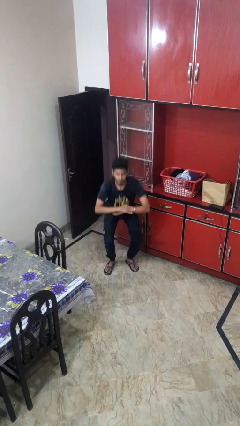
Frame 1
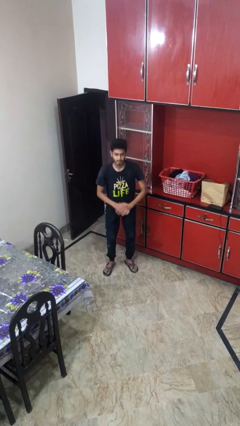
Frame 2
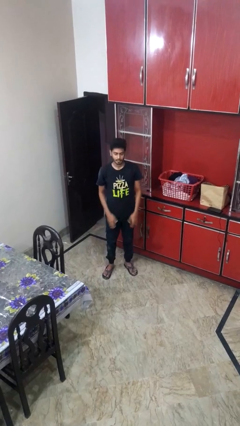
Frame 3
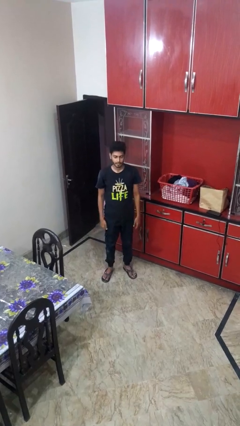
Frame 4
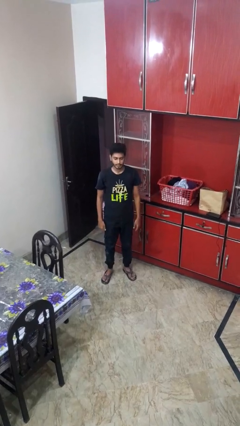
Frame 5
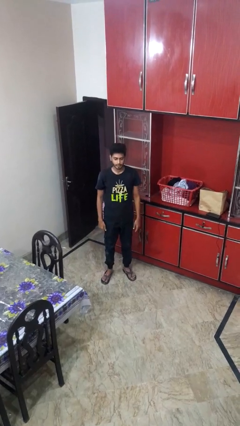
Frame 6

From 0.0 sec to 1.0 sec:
person stands up

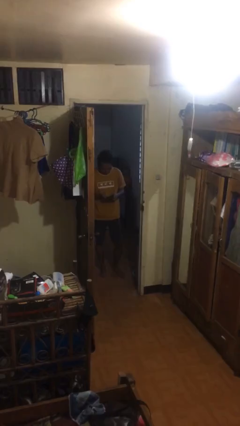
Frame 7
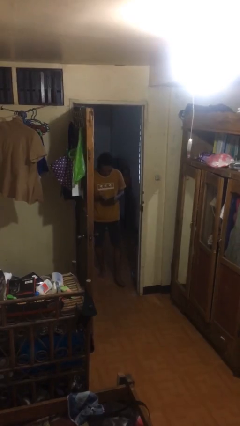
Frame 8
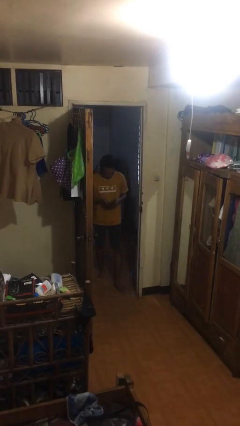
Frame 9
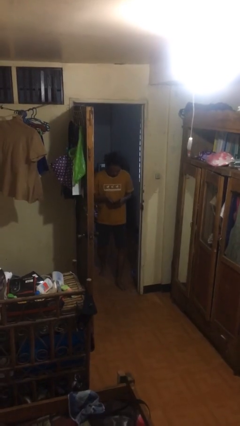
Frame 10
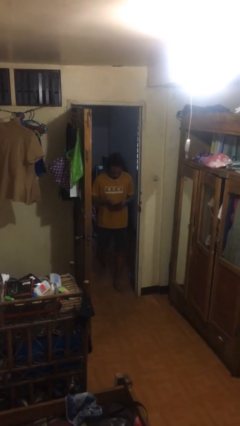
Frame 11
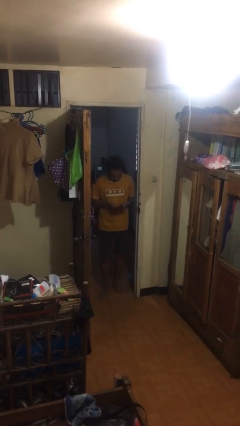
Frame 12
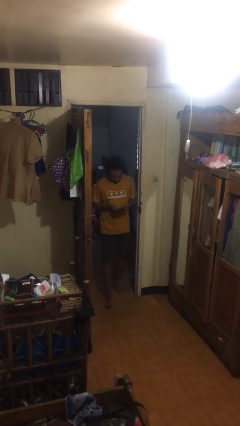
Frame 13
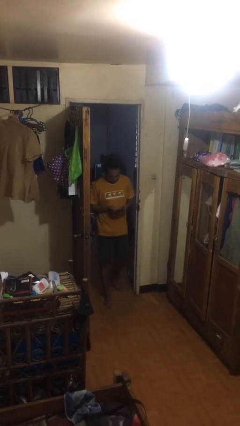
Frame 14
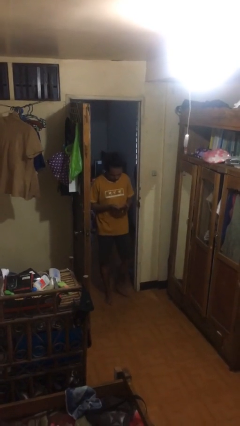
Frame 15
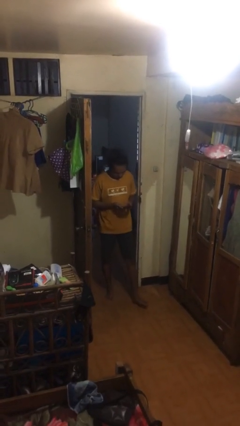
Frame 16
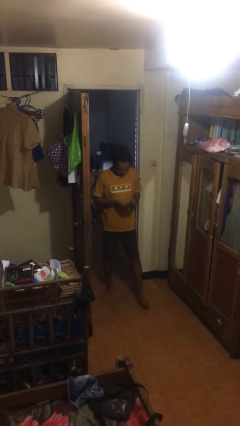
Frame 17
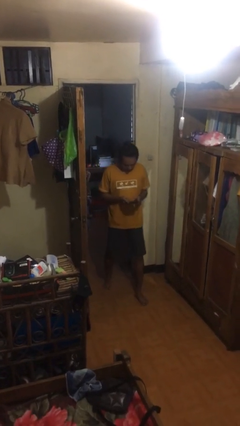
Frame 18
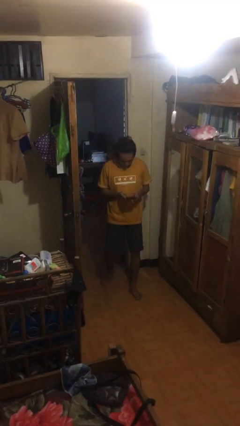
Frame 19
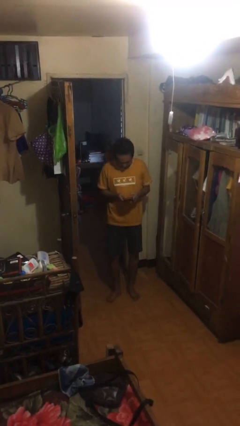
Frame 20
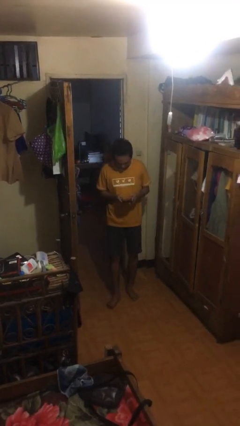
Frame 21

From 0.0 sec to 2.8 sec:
person enters scene through structure

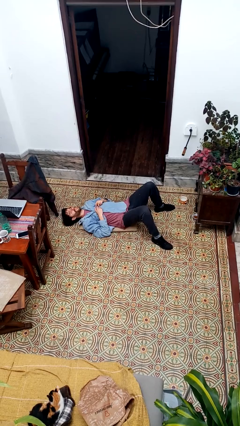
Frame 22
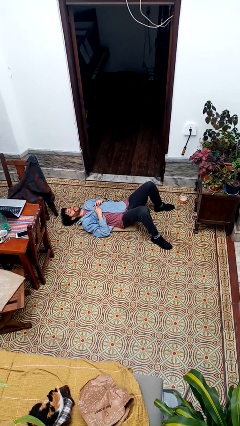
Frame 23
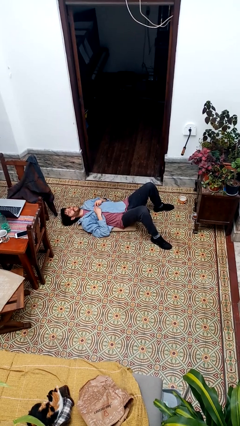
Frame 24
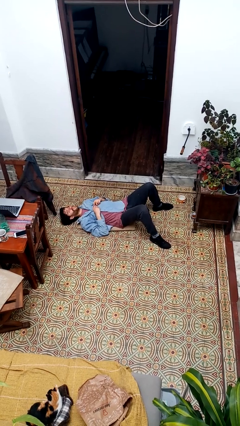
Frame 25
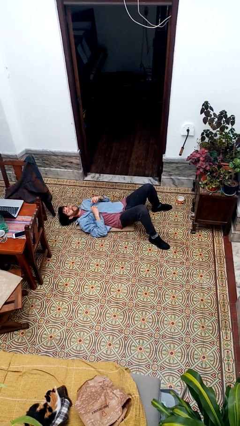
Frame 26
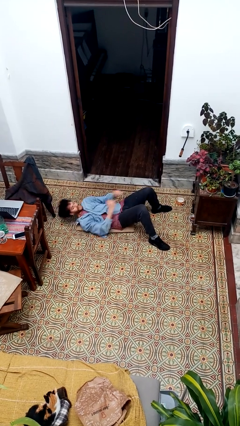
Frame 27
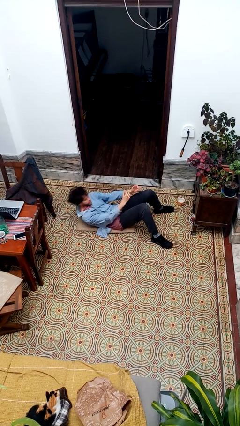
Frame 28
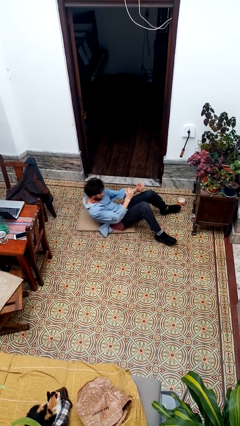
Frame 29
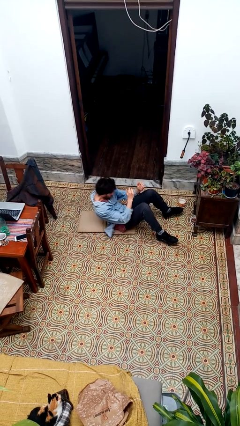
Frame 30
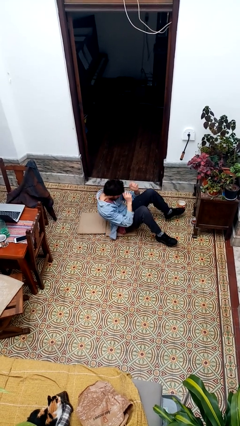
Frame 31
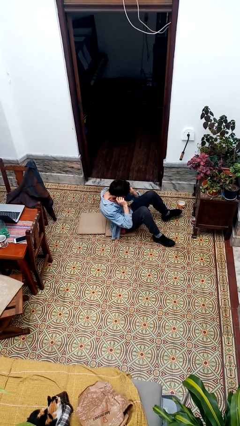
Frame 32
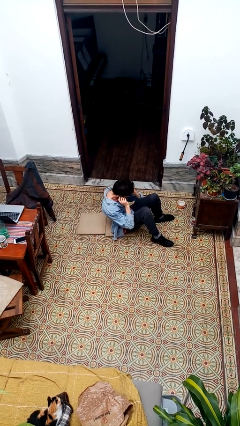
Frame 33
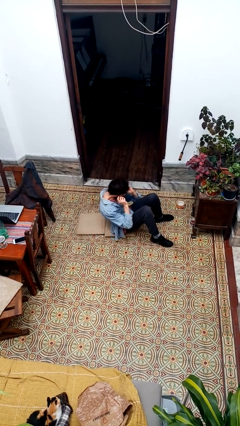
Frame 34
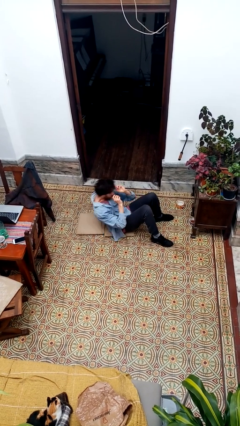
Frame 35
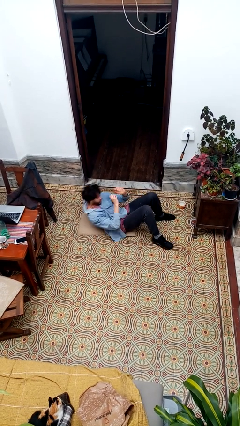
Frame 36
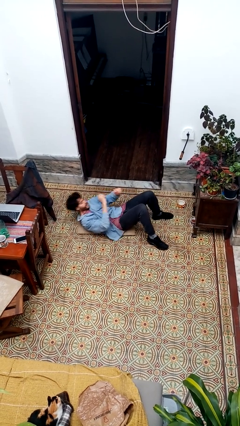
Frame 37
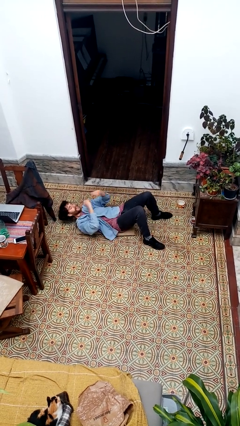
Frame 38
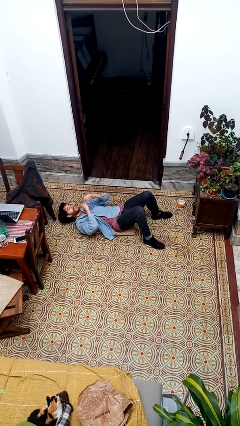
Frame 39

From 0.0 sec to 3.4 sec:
person exercises with situp

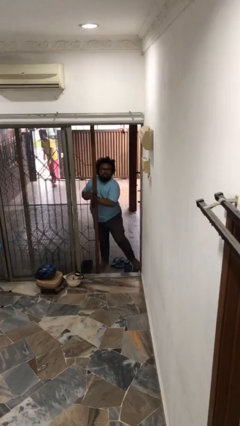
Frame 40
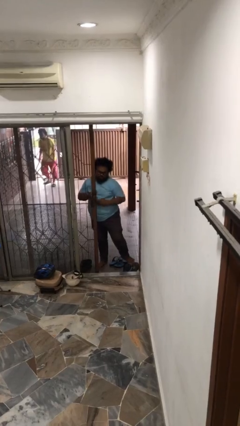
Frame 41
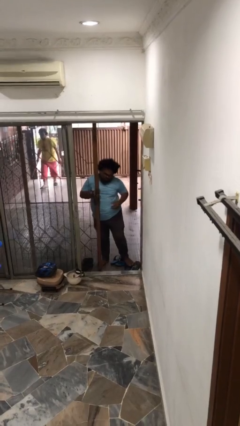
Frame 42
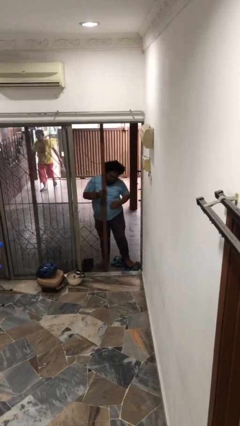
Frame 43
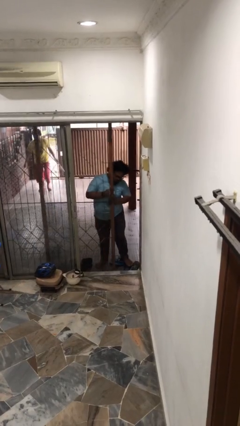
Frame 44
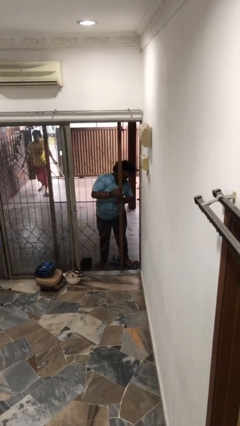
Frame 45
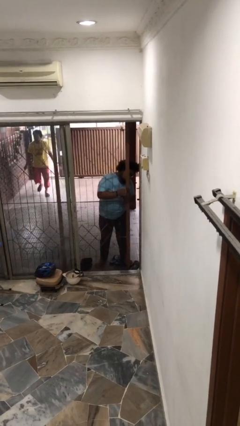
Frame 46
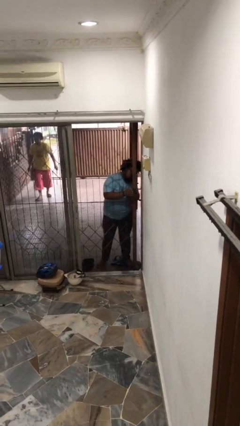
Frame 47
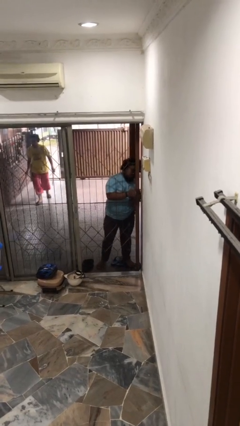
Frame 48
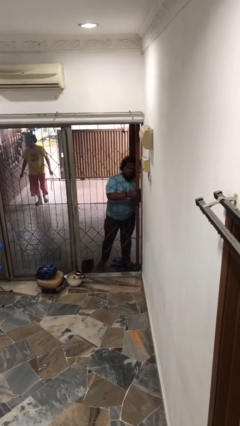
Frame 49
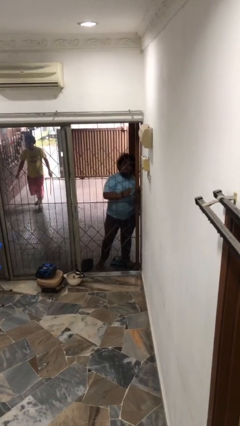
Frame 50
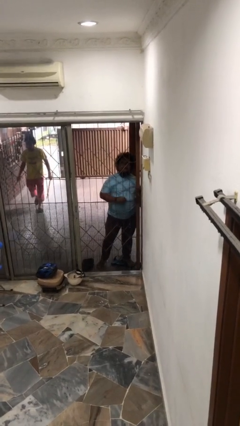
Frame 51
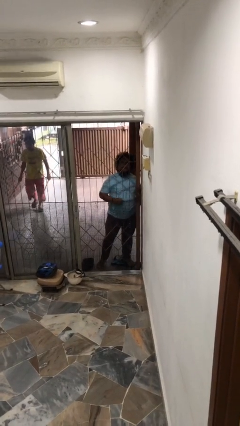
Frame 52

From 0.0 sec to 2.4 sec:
person closes facility door

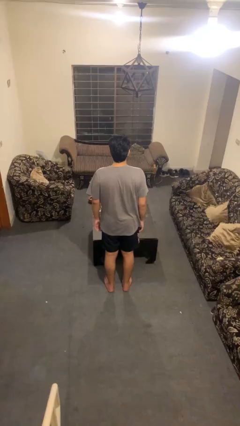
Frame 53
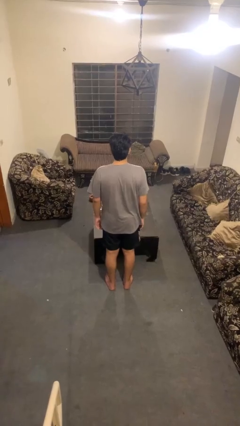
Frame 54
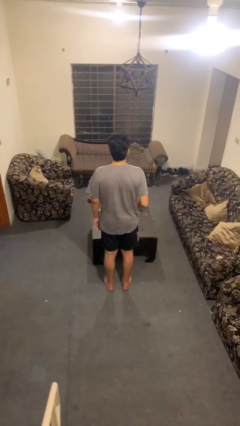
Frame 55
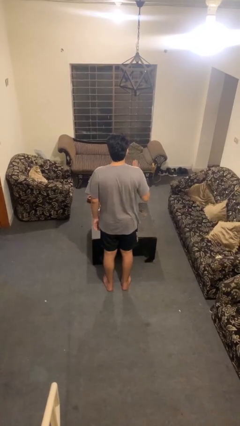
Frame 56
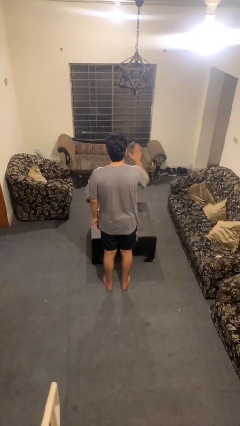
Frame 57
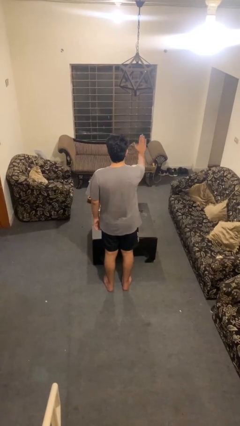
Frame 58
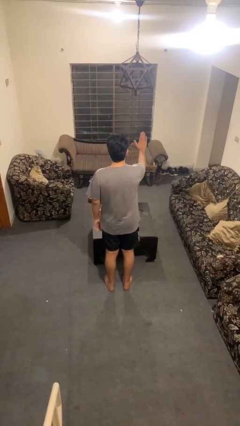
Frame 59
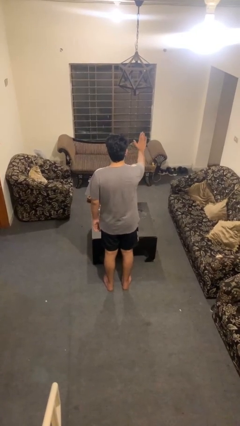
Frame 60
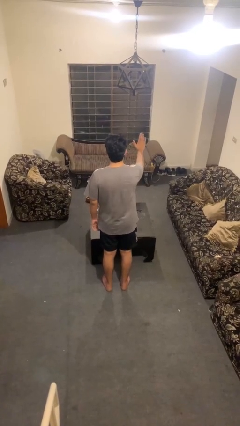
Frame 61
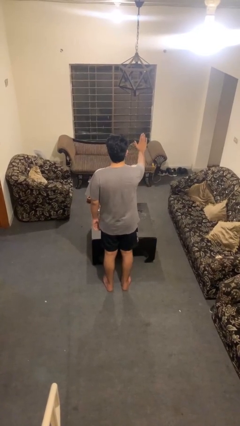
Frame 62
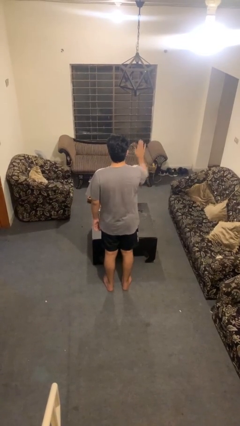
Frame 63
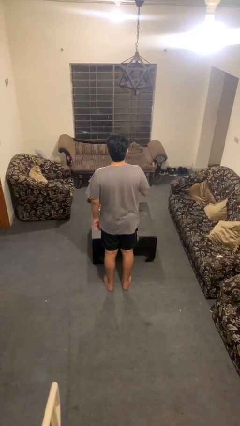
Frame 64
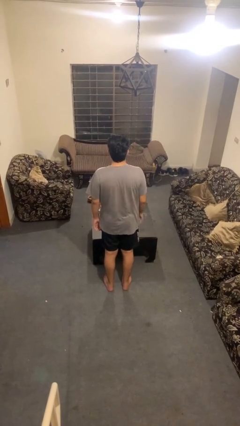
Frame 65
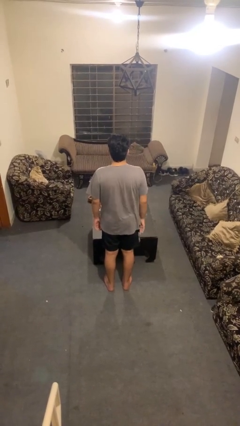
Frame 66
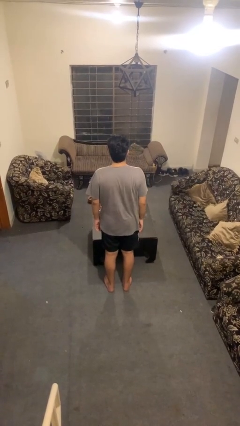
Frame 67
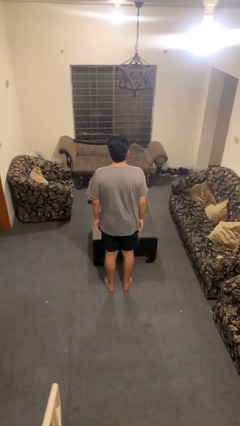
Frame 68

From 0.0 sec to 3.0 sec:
person gestures stop

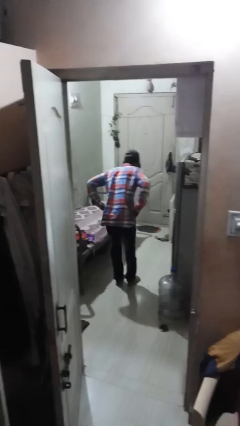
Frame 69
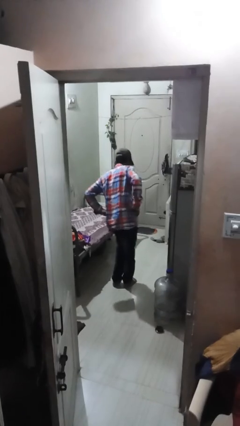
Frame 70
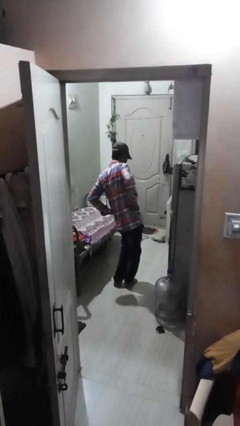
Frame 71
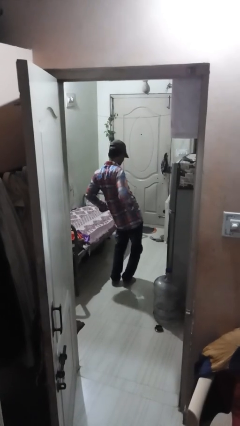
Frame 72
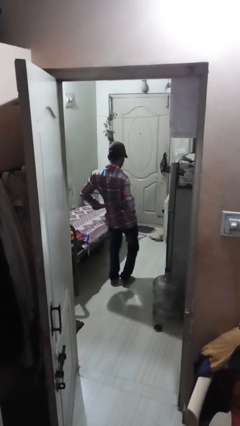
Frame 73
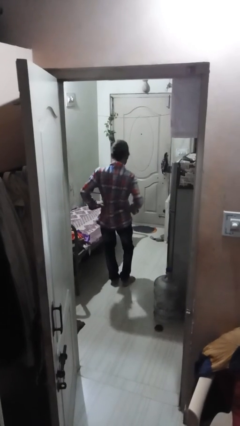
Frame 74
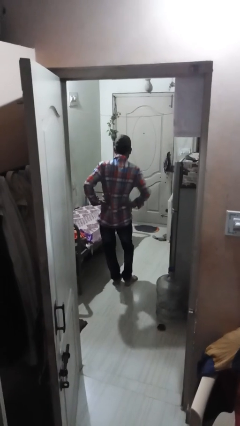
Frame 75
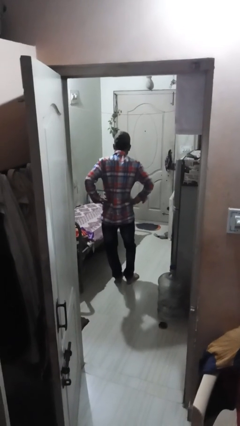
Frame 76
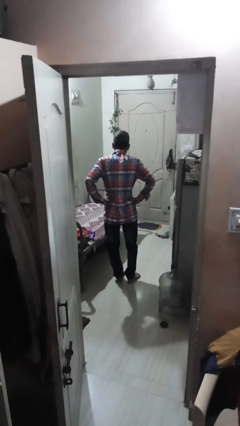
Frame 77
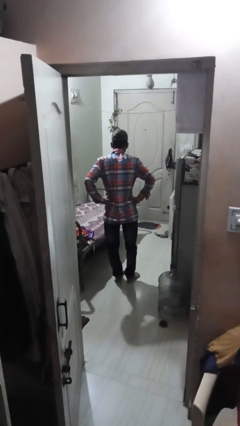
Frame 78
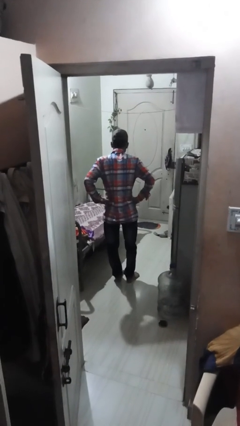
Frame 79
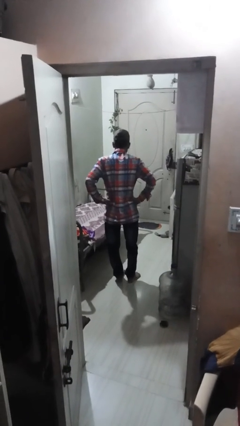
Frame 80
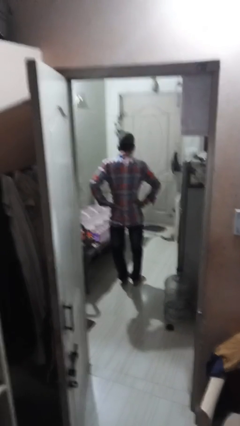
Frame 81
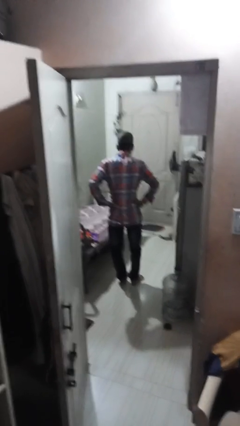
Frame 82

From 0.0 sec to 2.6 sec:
person wiggles hips

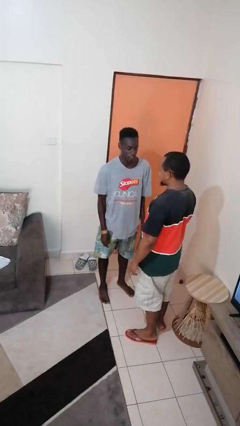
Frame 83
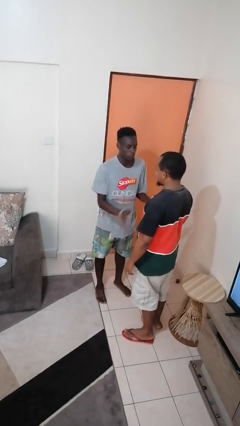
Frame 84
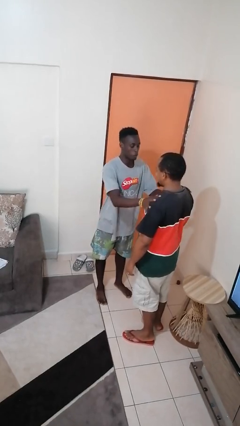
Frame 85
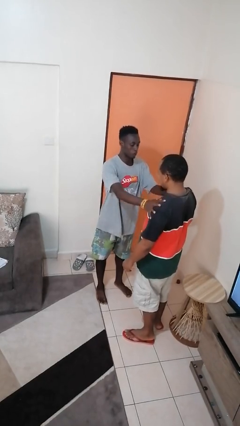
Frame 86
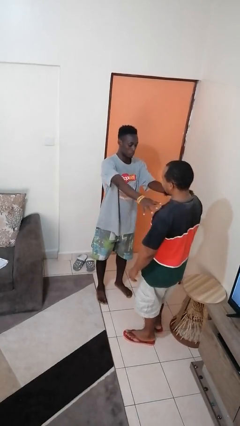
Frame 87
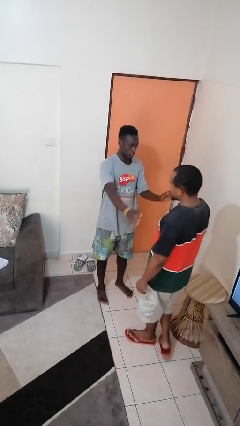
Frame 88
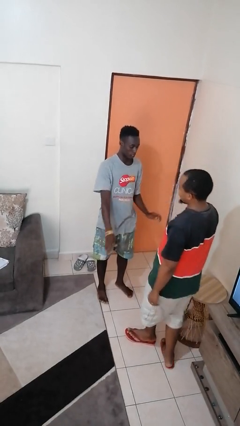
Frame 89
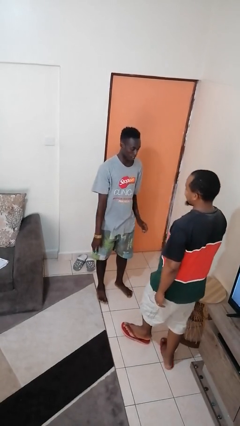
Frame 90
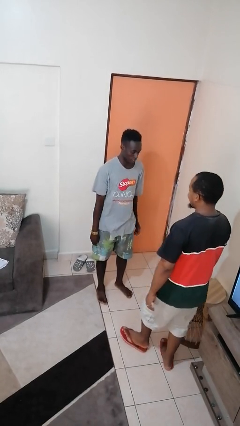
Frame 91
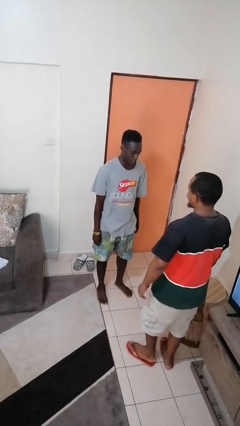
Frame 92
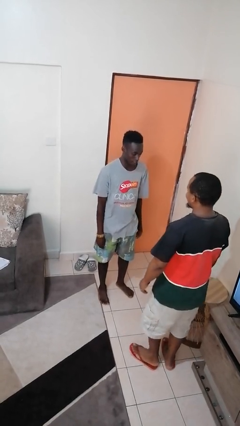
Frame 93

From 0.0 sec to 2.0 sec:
person shoves person
